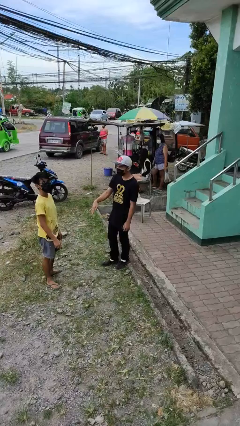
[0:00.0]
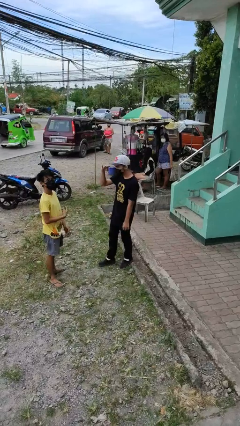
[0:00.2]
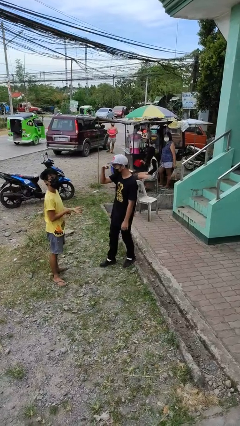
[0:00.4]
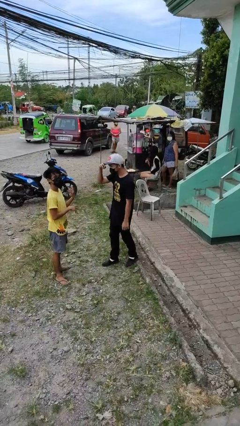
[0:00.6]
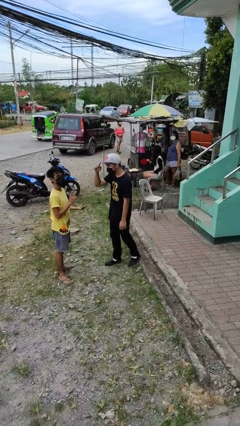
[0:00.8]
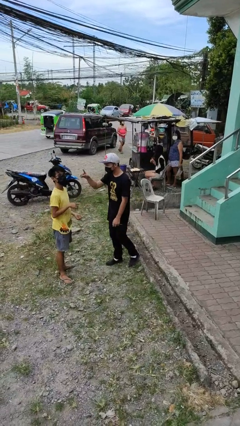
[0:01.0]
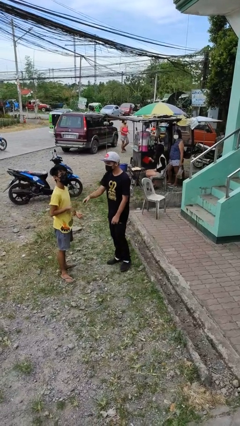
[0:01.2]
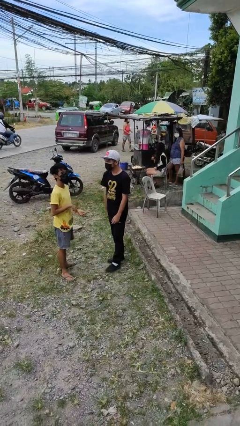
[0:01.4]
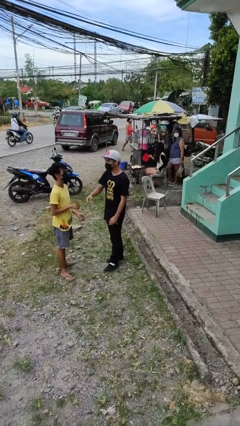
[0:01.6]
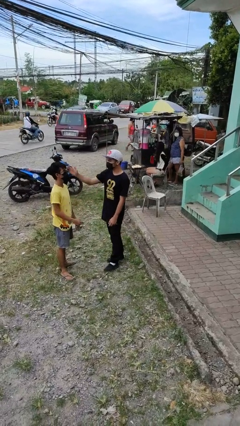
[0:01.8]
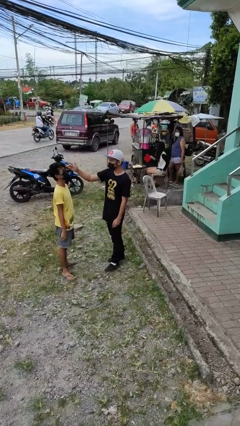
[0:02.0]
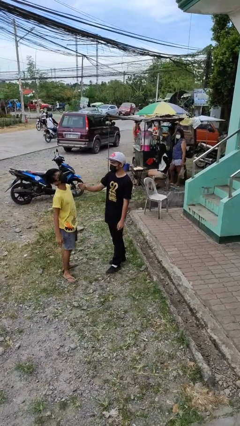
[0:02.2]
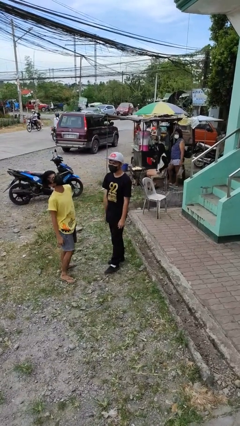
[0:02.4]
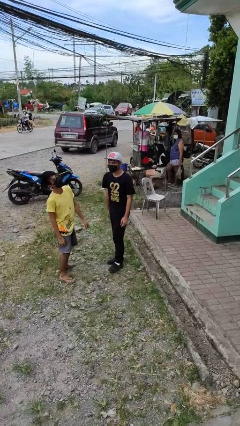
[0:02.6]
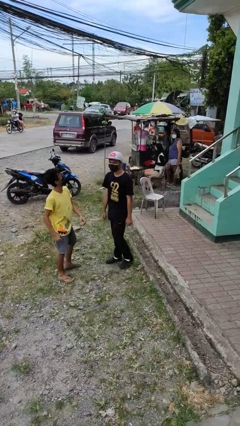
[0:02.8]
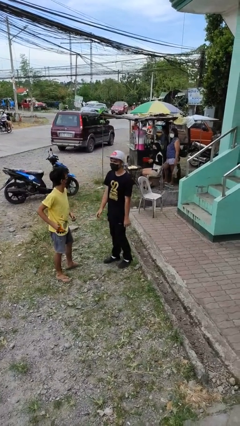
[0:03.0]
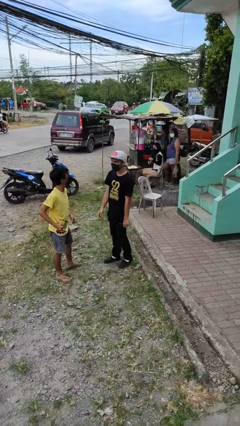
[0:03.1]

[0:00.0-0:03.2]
person talks to person

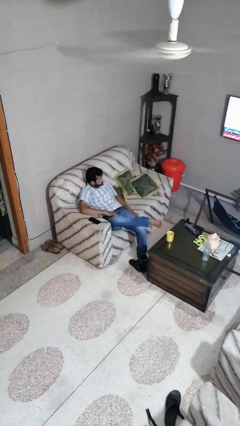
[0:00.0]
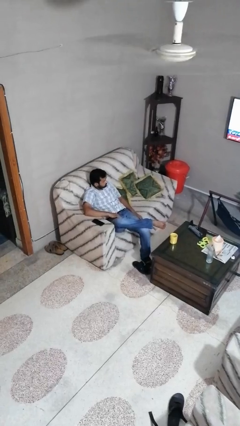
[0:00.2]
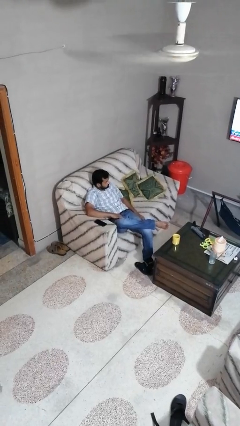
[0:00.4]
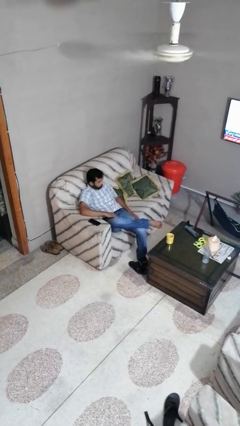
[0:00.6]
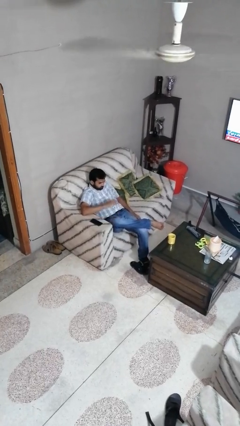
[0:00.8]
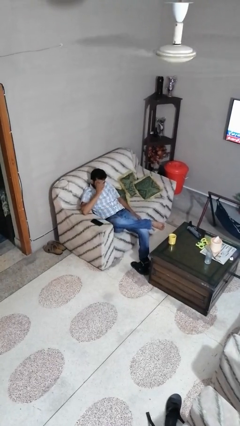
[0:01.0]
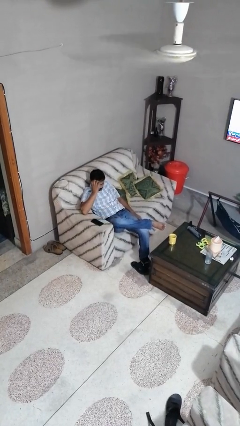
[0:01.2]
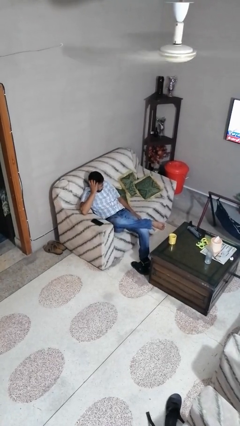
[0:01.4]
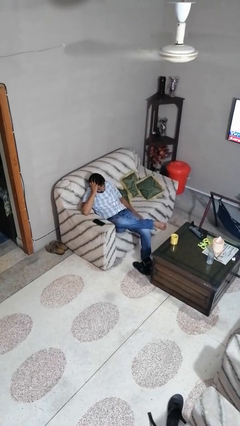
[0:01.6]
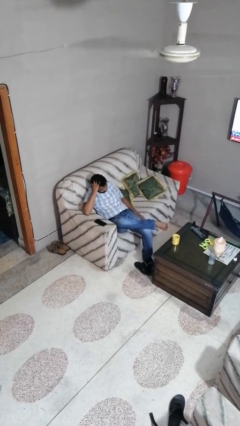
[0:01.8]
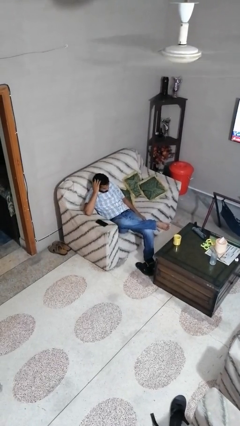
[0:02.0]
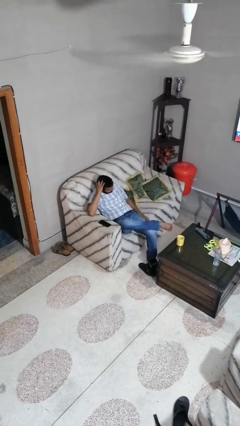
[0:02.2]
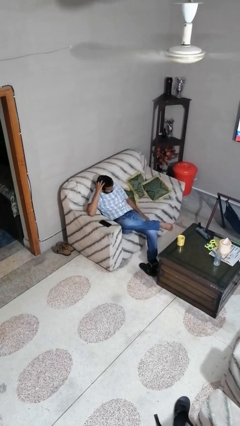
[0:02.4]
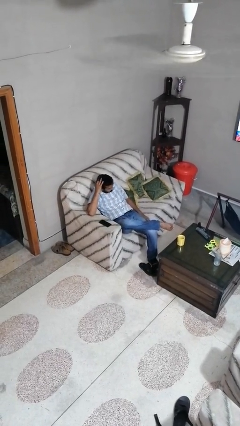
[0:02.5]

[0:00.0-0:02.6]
person strokes hair

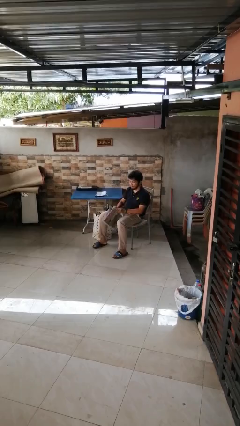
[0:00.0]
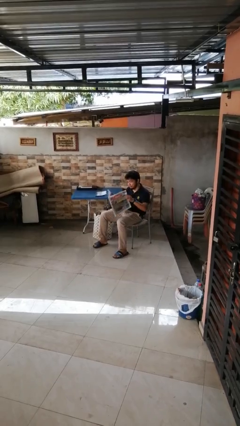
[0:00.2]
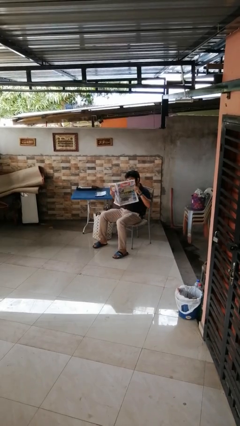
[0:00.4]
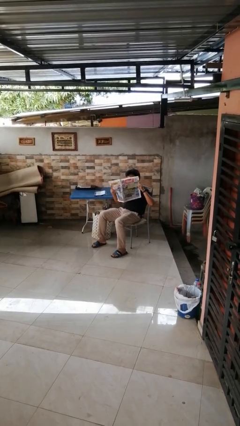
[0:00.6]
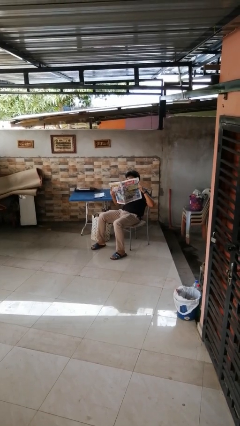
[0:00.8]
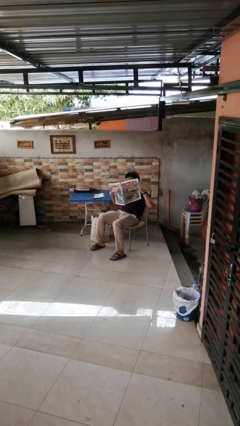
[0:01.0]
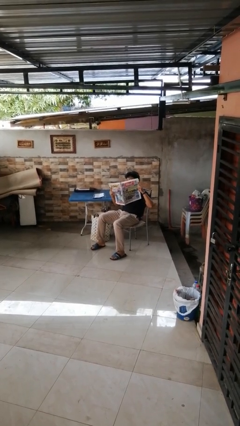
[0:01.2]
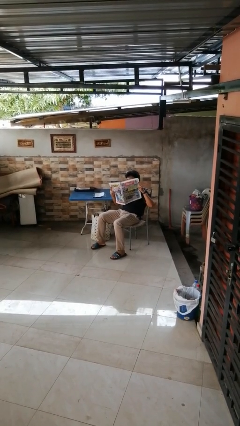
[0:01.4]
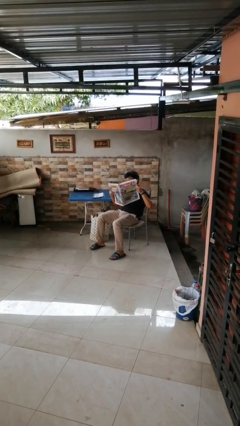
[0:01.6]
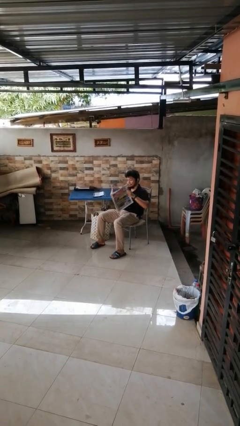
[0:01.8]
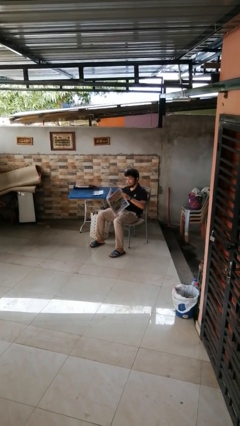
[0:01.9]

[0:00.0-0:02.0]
person reads newspaper

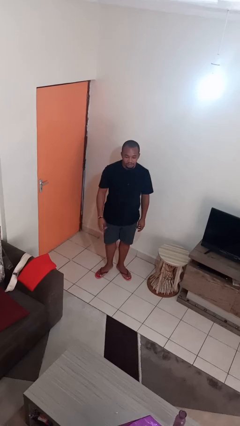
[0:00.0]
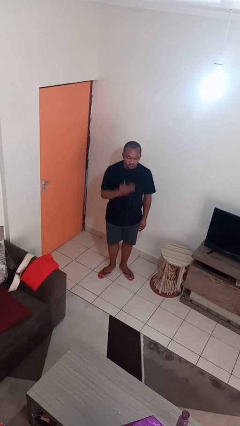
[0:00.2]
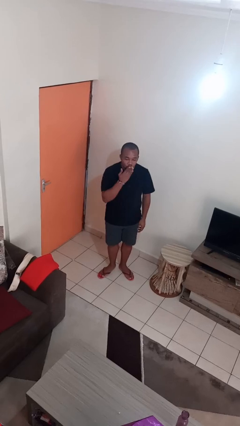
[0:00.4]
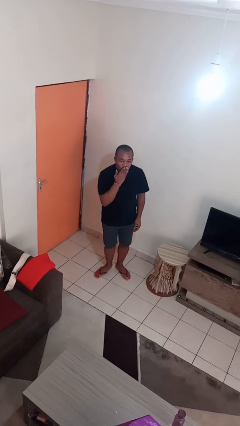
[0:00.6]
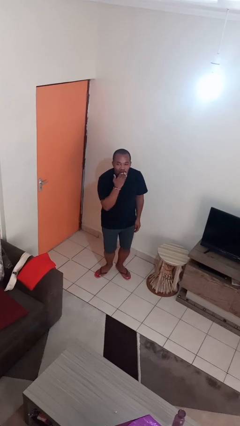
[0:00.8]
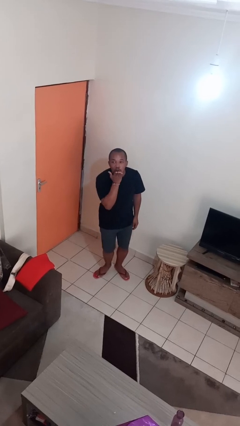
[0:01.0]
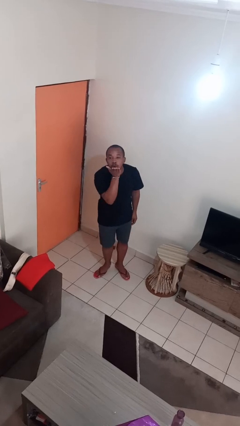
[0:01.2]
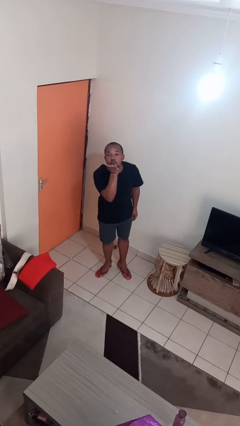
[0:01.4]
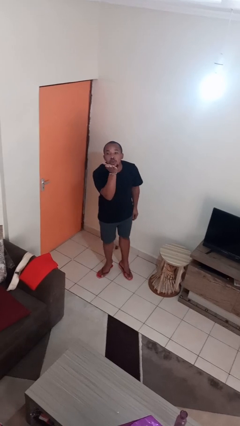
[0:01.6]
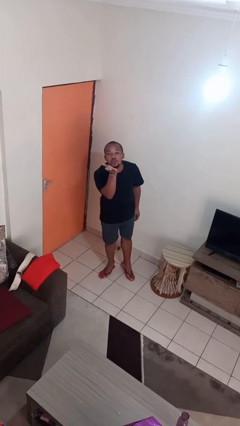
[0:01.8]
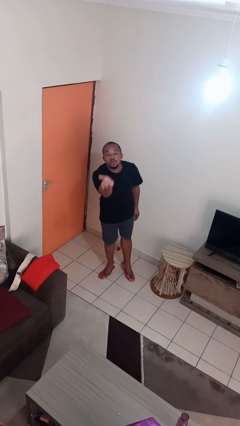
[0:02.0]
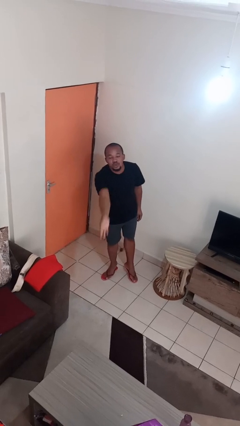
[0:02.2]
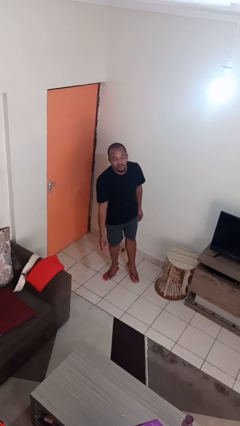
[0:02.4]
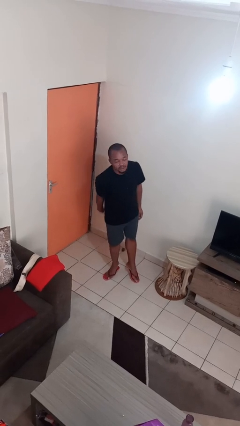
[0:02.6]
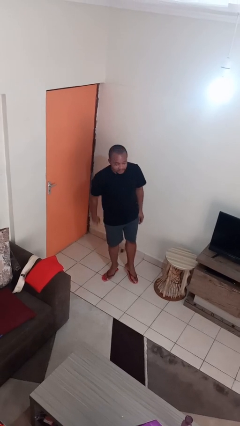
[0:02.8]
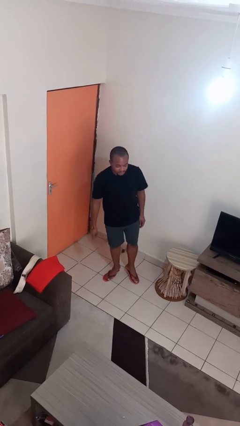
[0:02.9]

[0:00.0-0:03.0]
person gestures blow kiss

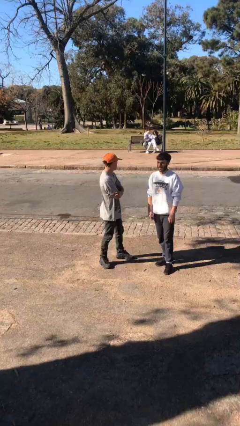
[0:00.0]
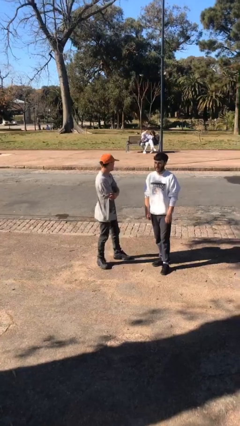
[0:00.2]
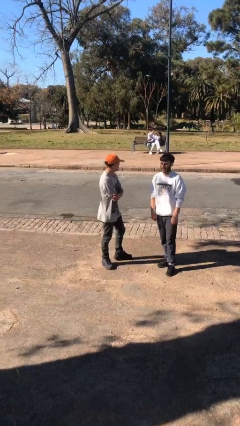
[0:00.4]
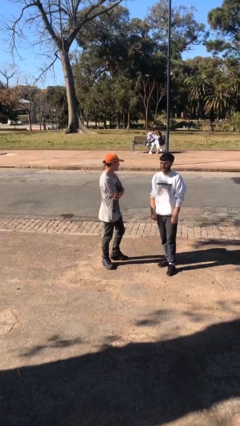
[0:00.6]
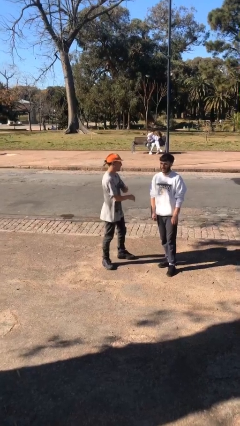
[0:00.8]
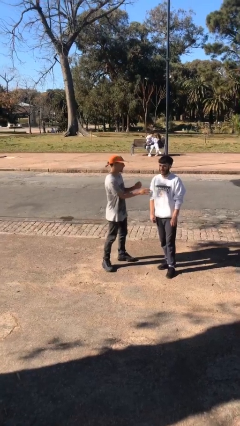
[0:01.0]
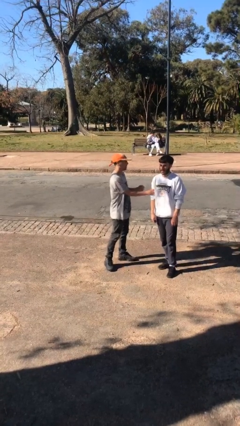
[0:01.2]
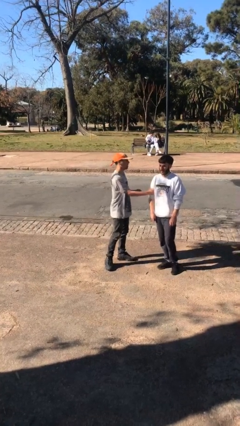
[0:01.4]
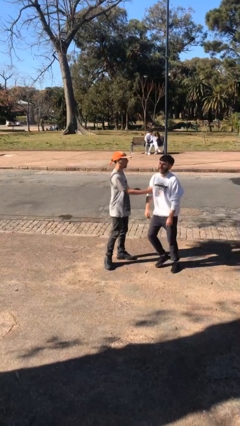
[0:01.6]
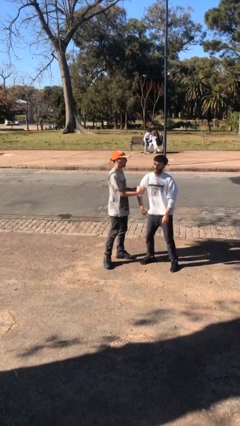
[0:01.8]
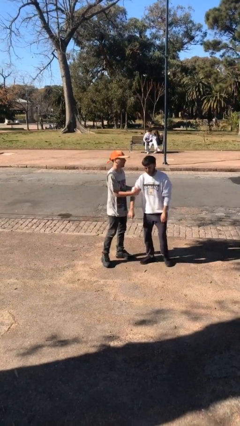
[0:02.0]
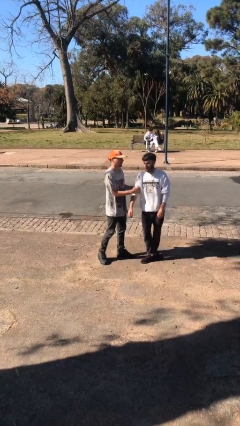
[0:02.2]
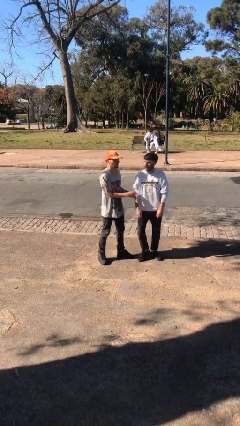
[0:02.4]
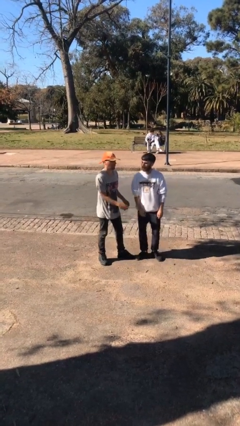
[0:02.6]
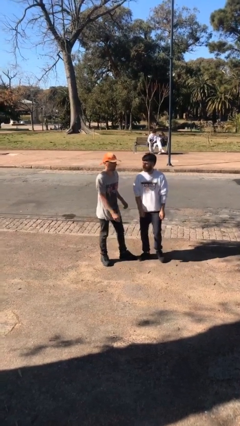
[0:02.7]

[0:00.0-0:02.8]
person grabs person by bicep

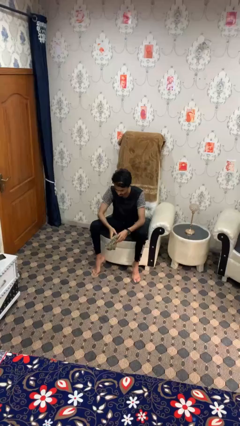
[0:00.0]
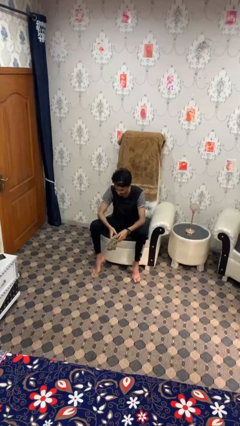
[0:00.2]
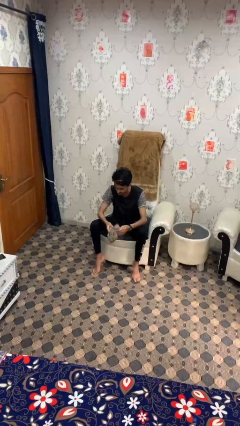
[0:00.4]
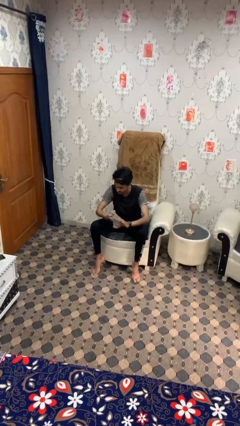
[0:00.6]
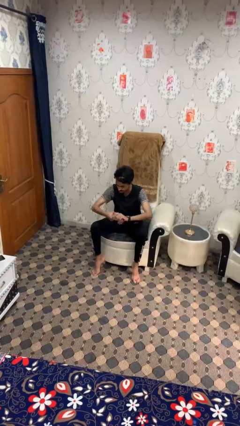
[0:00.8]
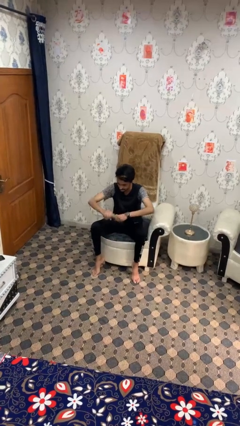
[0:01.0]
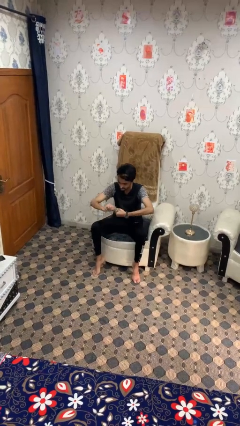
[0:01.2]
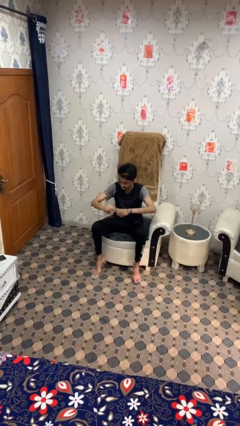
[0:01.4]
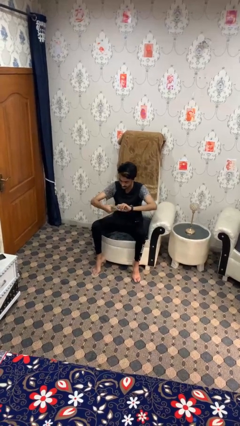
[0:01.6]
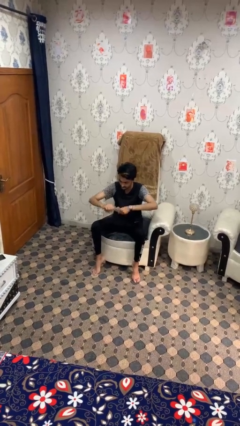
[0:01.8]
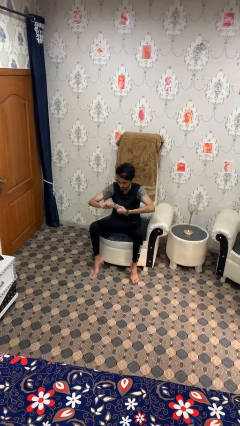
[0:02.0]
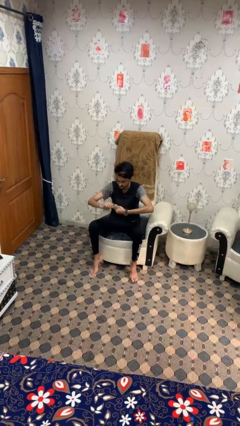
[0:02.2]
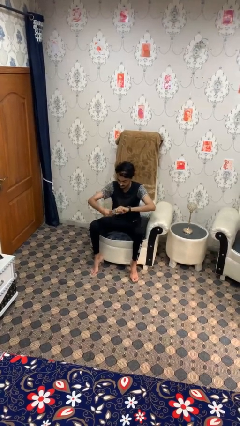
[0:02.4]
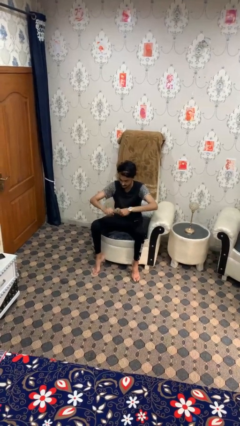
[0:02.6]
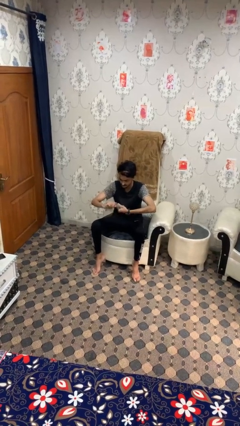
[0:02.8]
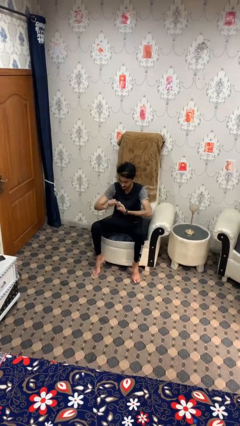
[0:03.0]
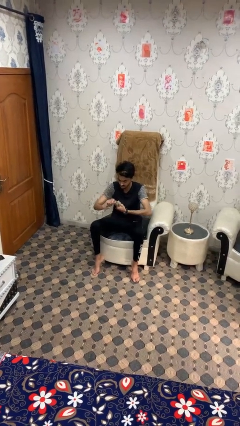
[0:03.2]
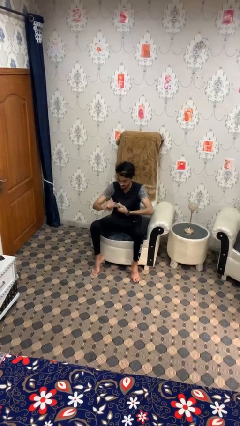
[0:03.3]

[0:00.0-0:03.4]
person squeezes object

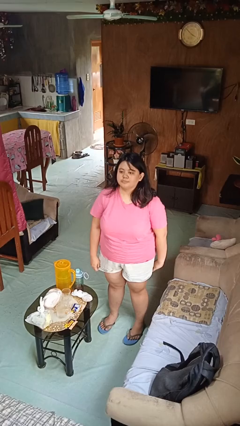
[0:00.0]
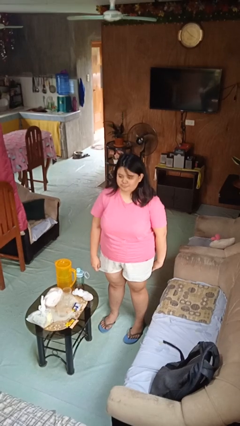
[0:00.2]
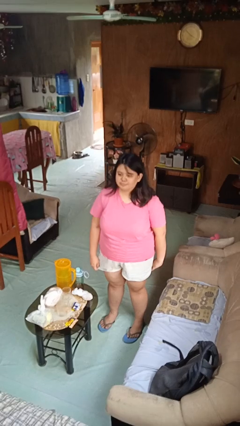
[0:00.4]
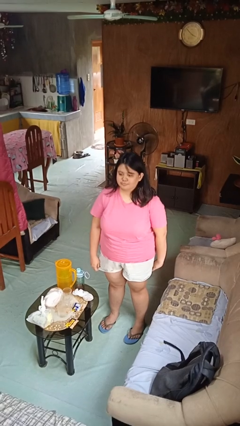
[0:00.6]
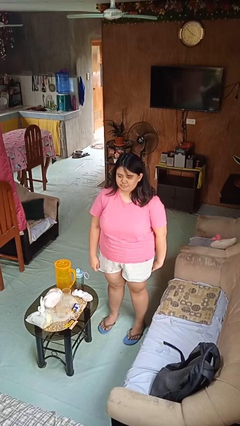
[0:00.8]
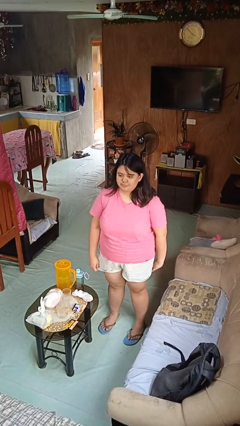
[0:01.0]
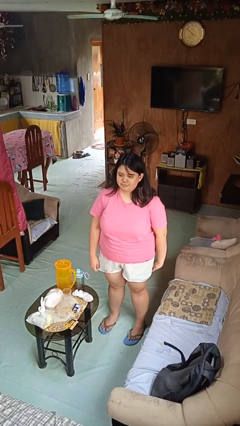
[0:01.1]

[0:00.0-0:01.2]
person nods head
